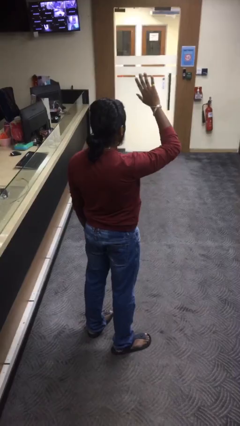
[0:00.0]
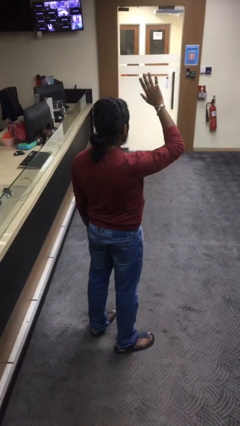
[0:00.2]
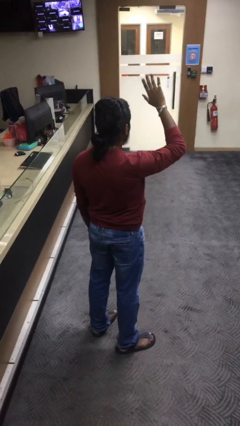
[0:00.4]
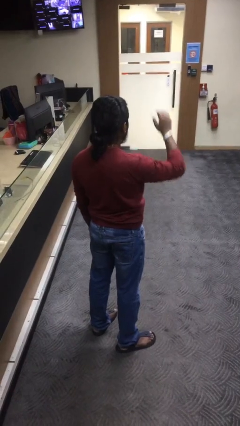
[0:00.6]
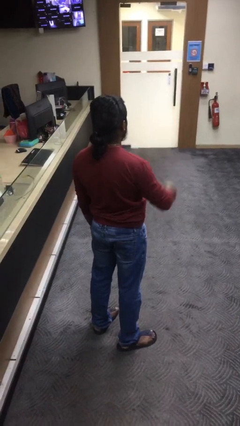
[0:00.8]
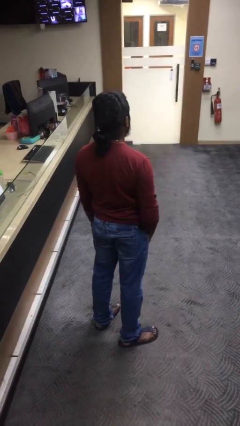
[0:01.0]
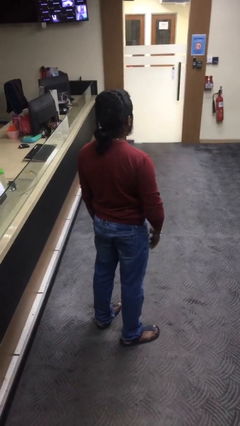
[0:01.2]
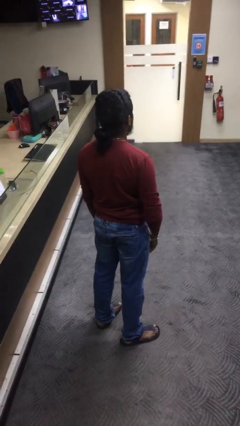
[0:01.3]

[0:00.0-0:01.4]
person gestures lower hand

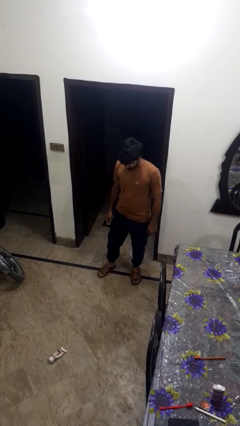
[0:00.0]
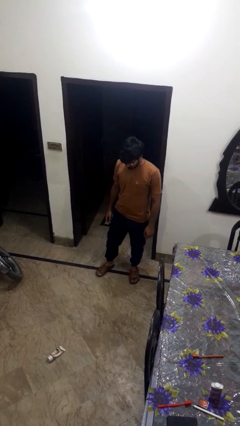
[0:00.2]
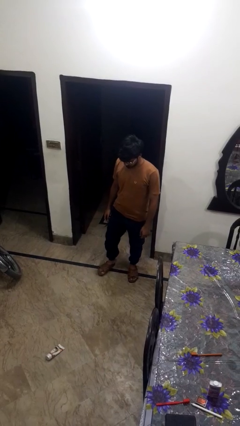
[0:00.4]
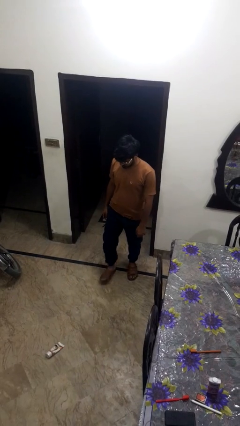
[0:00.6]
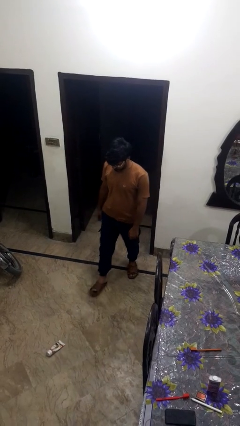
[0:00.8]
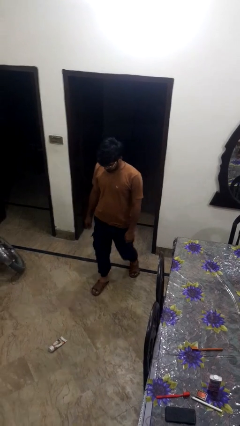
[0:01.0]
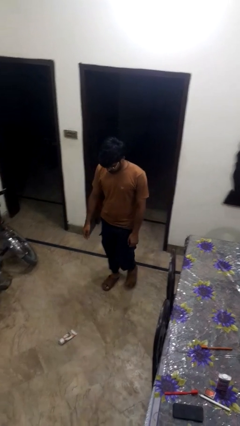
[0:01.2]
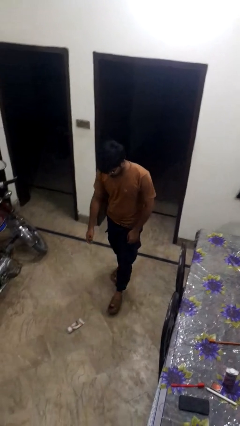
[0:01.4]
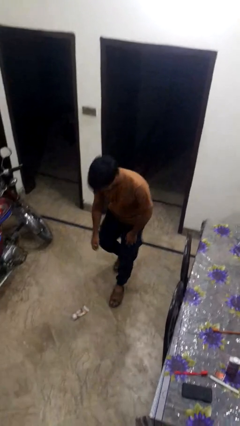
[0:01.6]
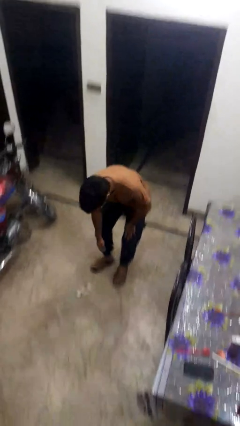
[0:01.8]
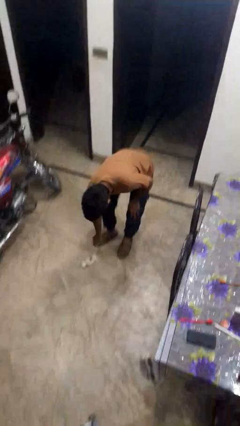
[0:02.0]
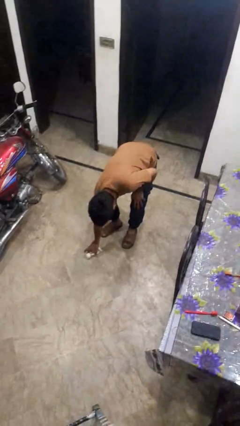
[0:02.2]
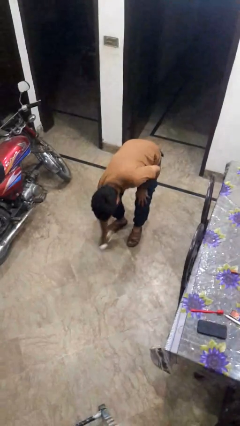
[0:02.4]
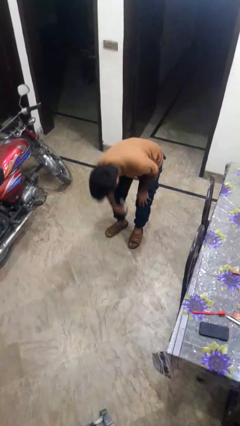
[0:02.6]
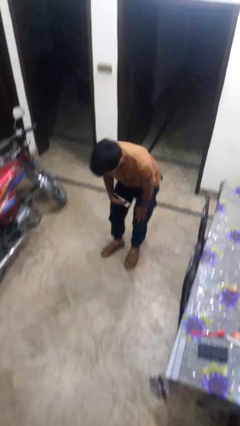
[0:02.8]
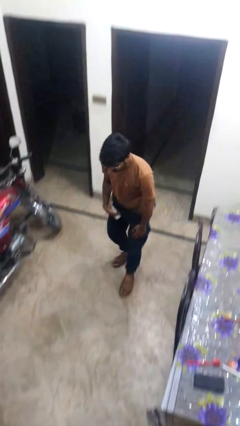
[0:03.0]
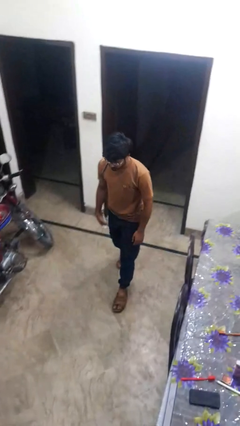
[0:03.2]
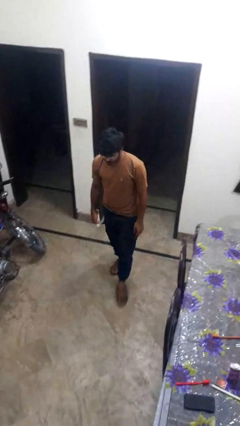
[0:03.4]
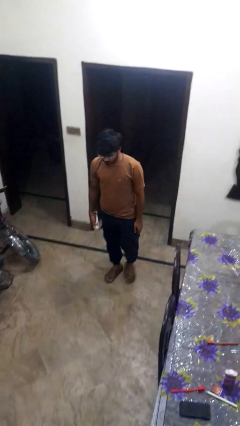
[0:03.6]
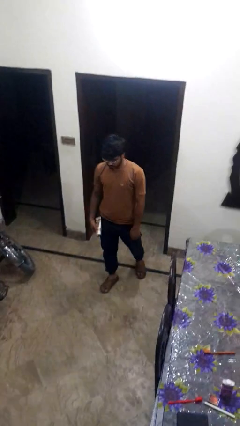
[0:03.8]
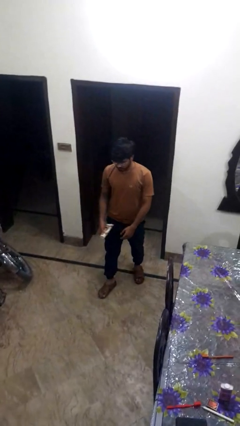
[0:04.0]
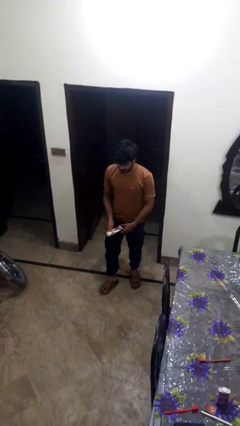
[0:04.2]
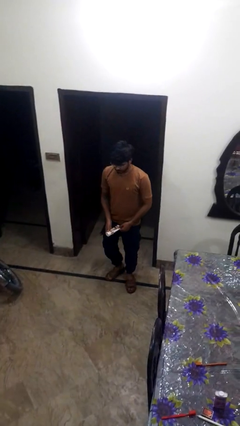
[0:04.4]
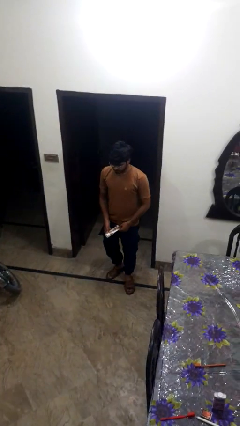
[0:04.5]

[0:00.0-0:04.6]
person picks up object from floor

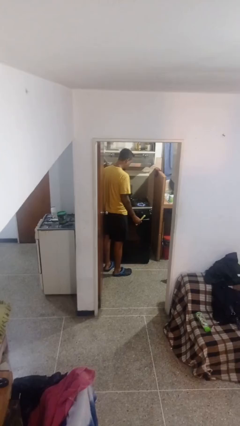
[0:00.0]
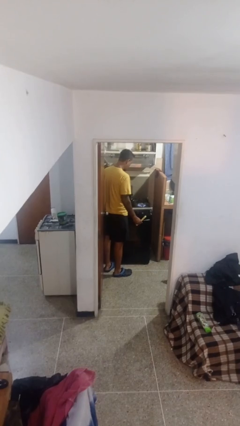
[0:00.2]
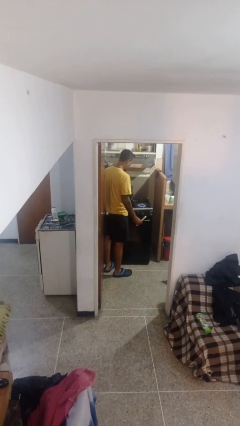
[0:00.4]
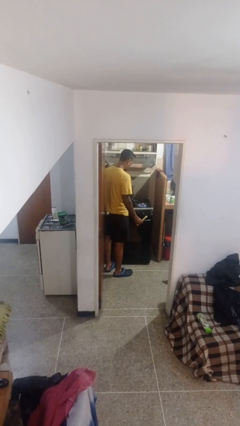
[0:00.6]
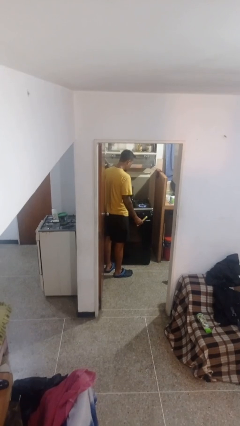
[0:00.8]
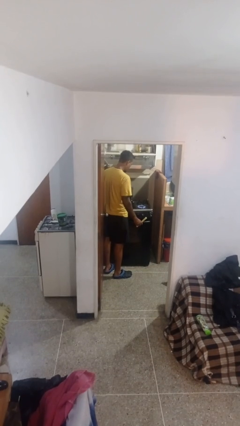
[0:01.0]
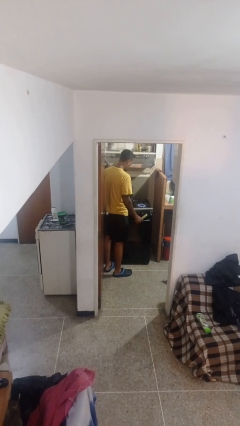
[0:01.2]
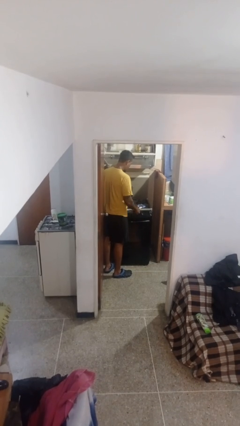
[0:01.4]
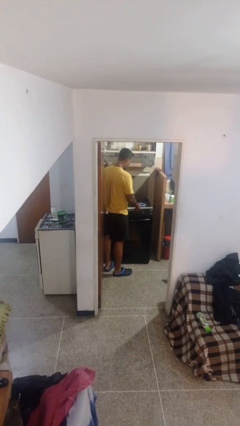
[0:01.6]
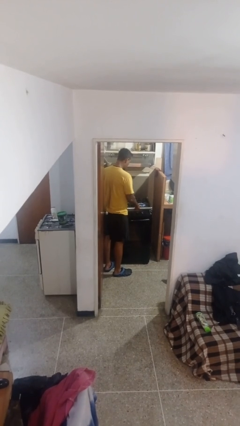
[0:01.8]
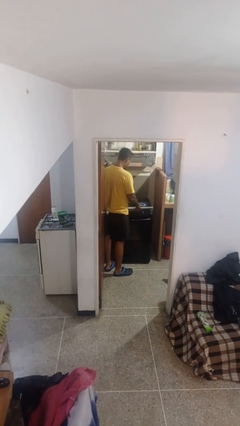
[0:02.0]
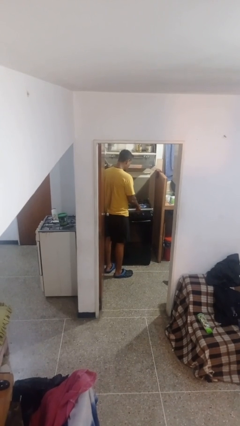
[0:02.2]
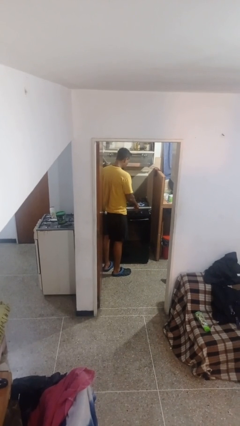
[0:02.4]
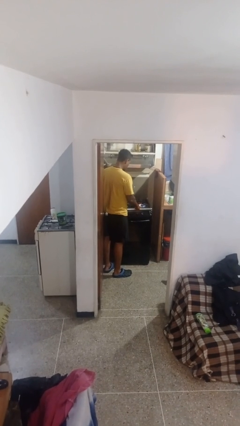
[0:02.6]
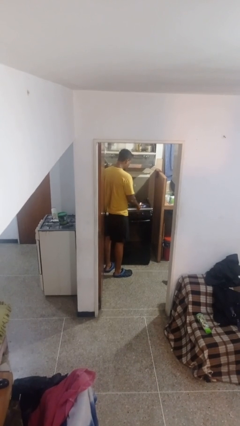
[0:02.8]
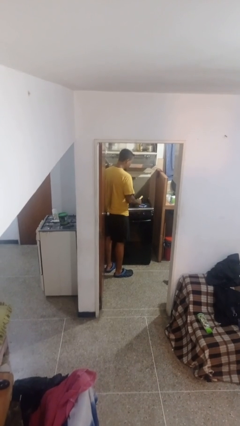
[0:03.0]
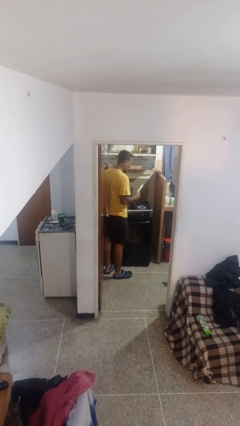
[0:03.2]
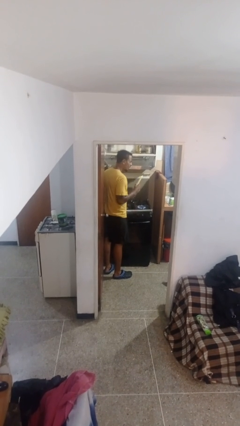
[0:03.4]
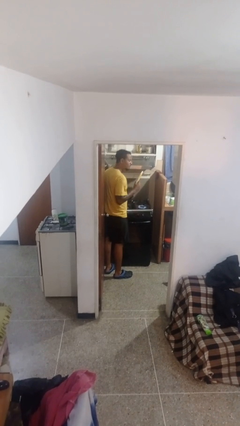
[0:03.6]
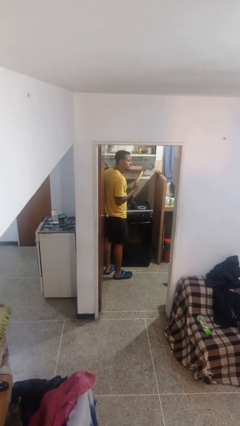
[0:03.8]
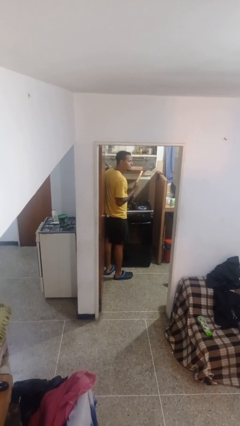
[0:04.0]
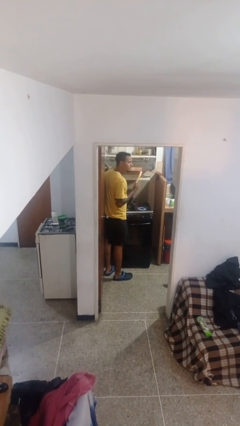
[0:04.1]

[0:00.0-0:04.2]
person lights candle

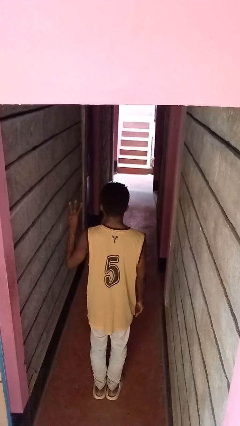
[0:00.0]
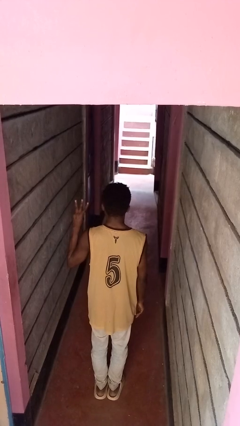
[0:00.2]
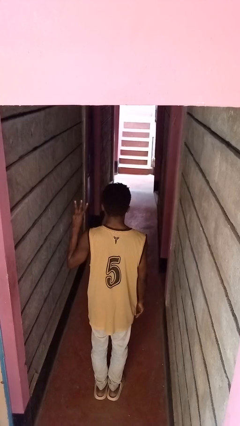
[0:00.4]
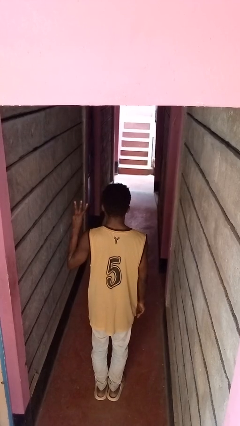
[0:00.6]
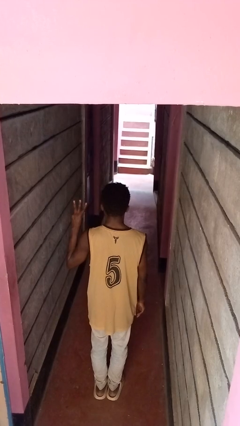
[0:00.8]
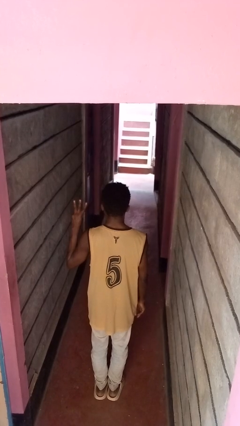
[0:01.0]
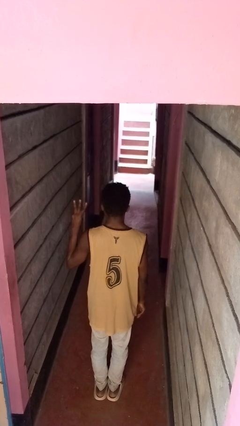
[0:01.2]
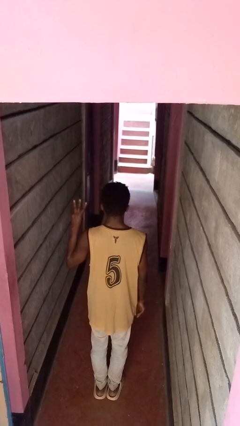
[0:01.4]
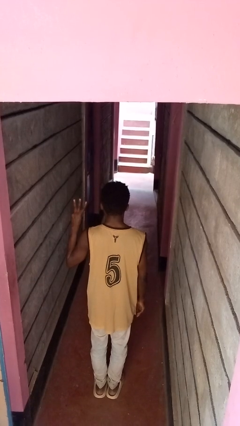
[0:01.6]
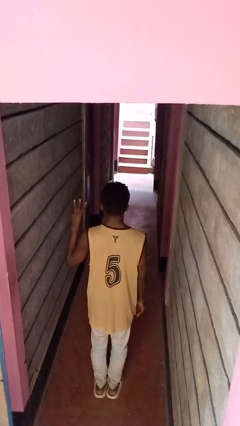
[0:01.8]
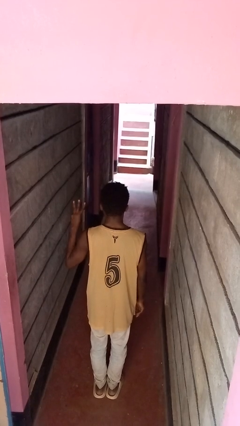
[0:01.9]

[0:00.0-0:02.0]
person gestures number three

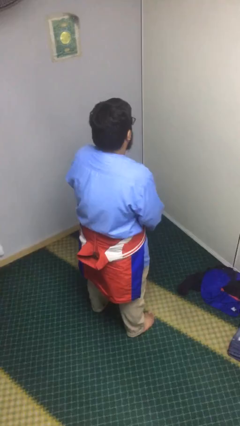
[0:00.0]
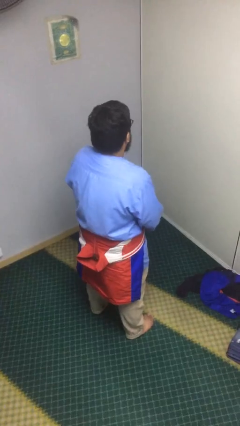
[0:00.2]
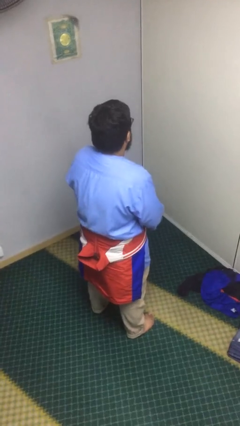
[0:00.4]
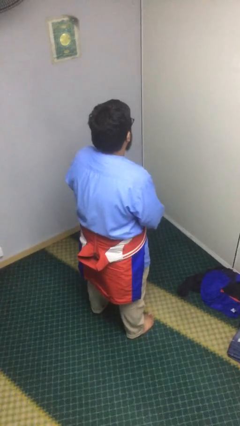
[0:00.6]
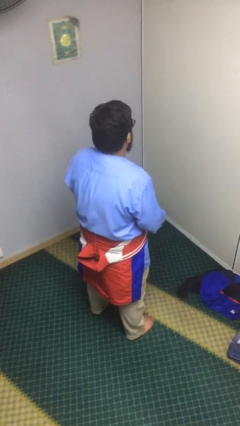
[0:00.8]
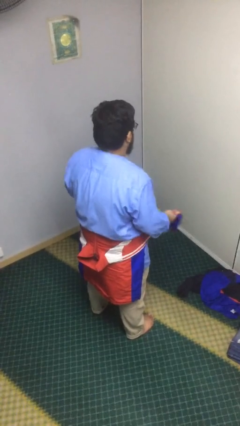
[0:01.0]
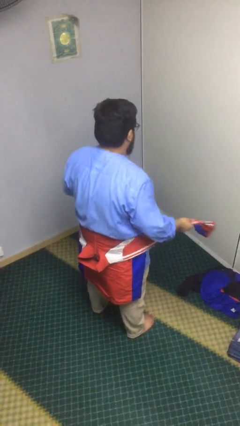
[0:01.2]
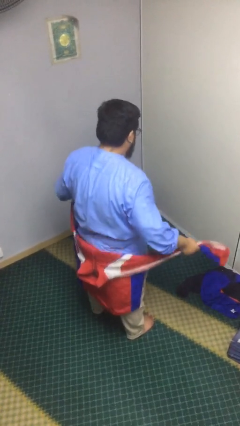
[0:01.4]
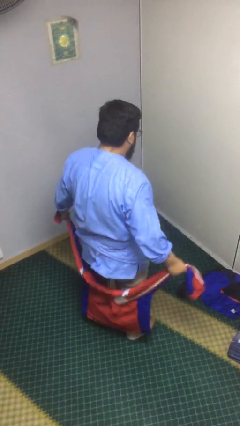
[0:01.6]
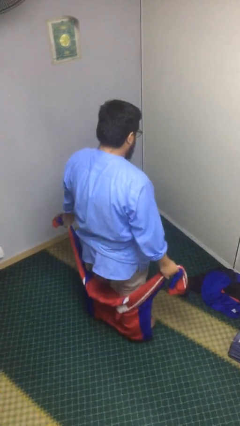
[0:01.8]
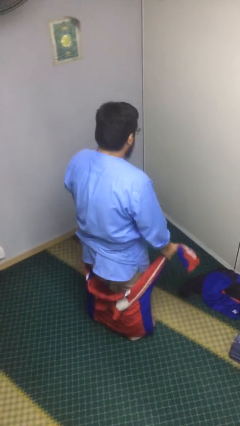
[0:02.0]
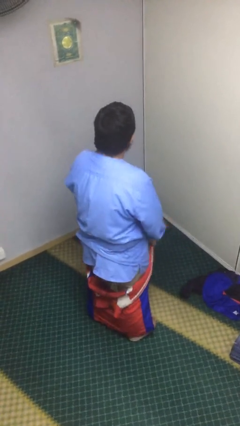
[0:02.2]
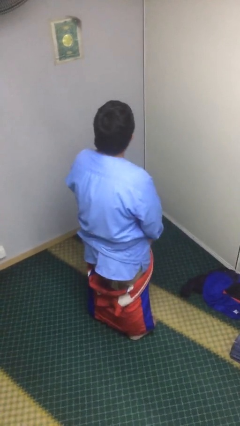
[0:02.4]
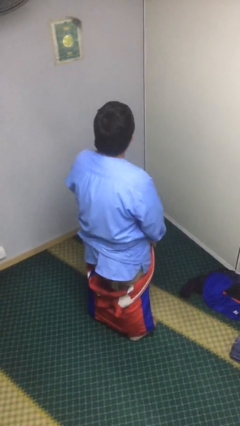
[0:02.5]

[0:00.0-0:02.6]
person unties jacket around waist

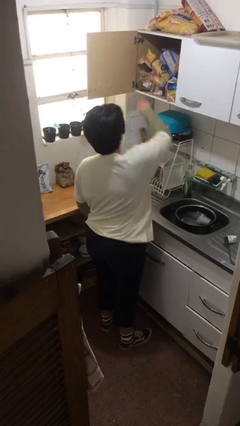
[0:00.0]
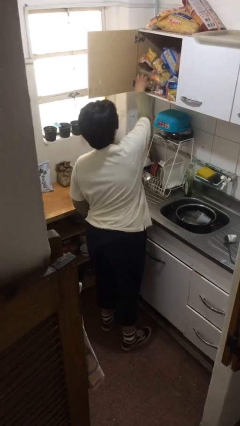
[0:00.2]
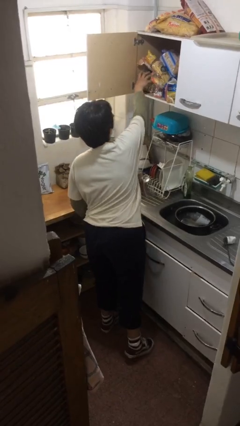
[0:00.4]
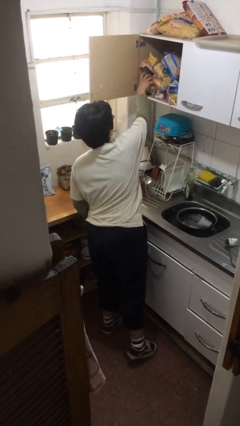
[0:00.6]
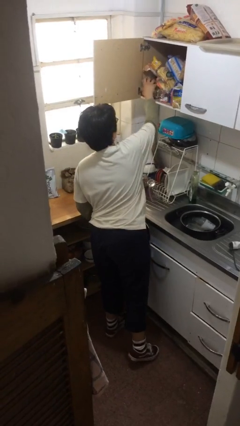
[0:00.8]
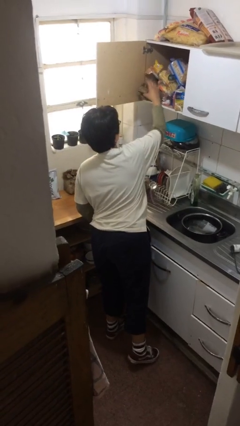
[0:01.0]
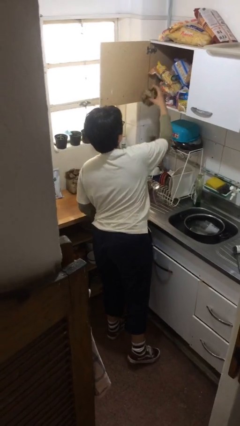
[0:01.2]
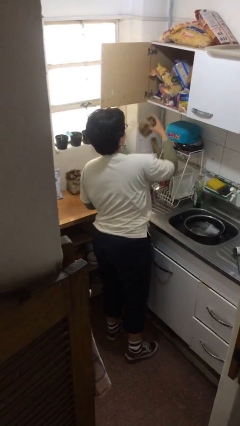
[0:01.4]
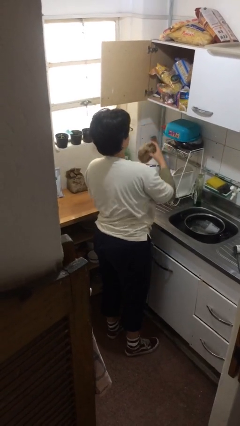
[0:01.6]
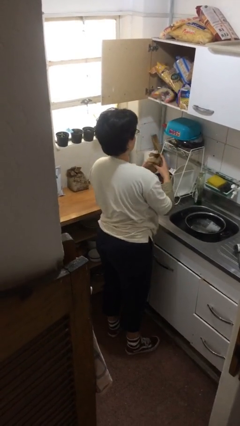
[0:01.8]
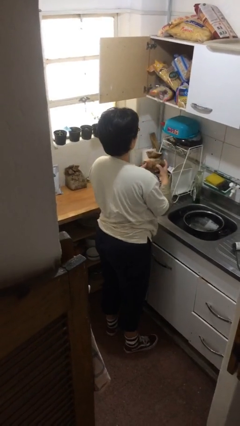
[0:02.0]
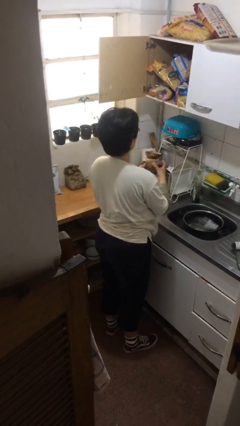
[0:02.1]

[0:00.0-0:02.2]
person takes object from cabinet
